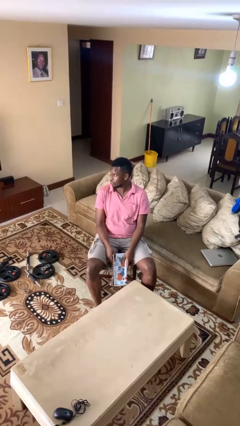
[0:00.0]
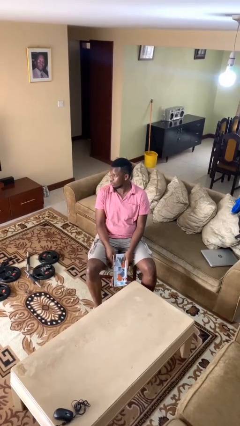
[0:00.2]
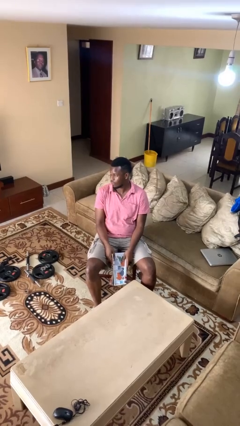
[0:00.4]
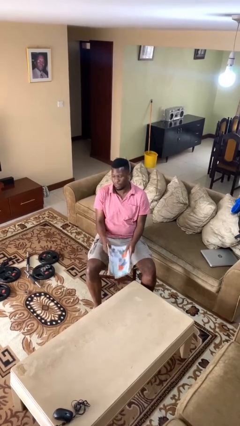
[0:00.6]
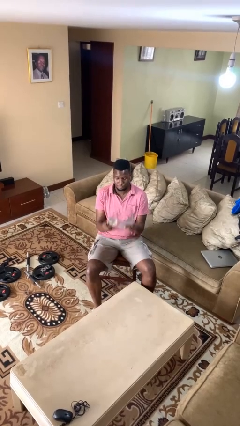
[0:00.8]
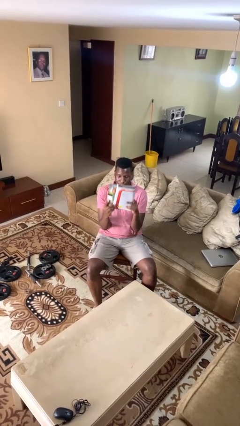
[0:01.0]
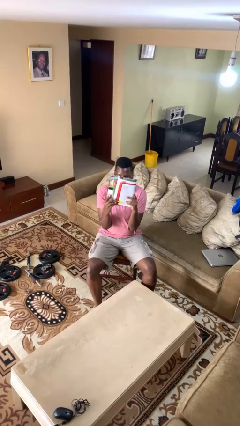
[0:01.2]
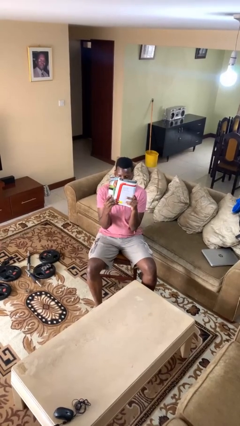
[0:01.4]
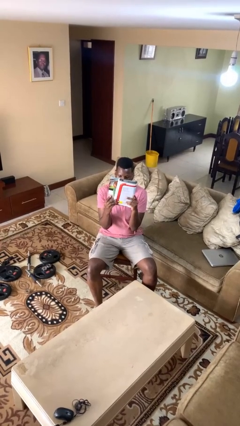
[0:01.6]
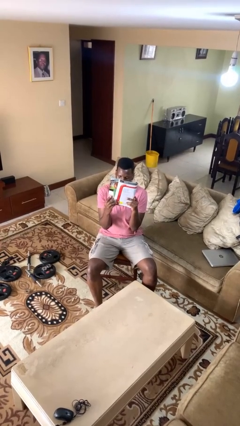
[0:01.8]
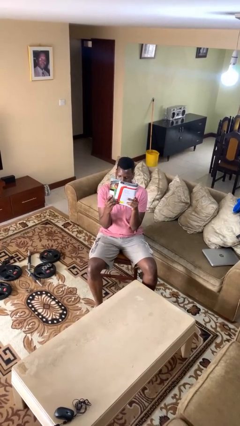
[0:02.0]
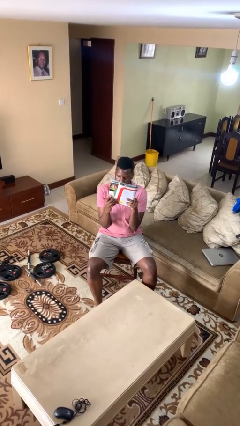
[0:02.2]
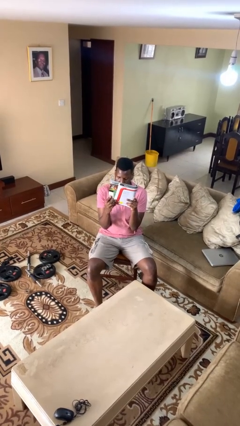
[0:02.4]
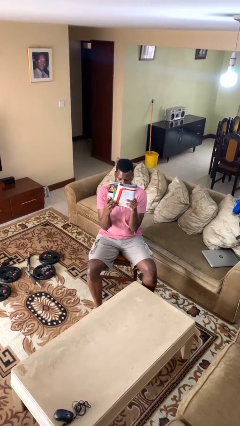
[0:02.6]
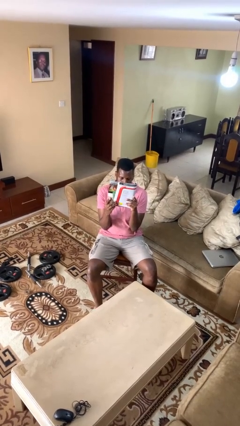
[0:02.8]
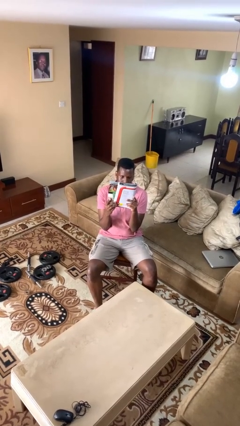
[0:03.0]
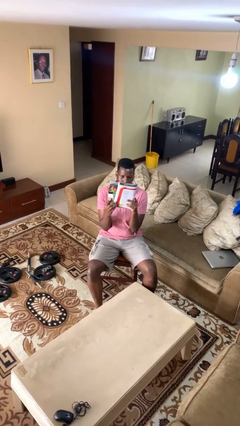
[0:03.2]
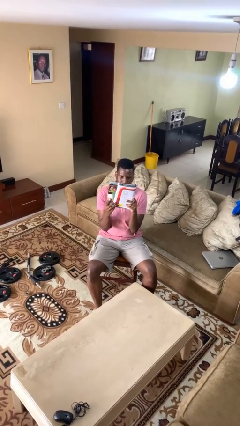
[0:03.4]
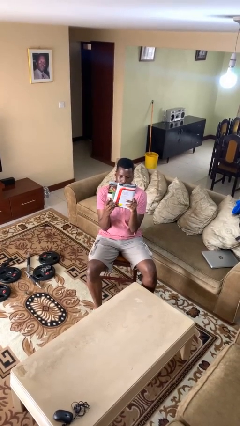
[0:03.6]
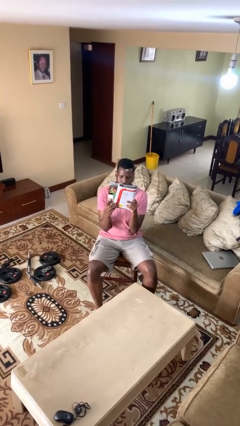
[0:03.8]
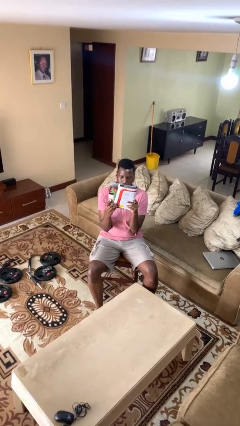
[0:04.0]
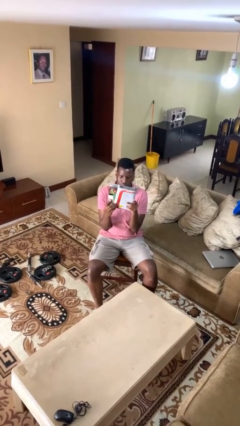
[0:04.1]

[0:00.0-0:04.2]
person reads document

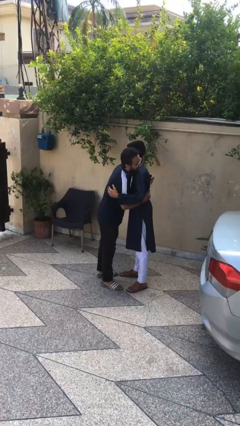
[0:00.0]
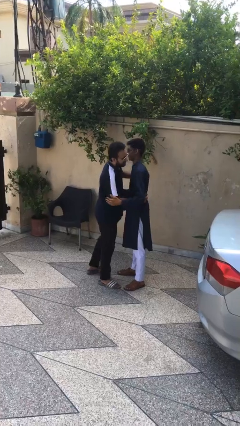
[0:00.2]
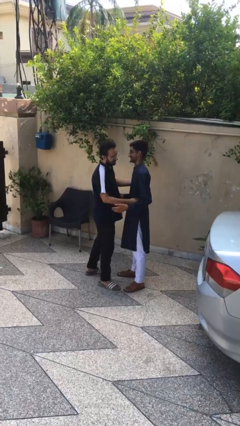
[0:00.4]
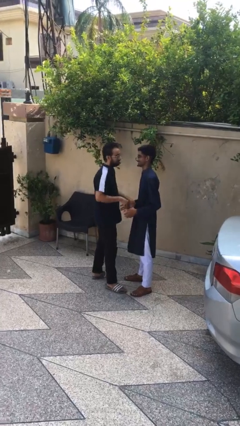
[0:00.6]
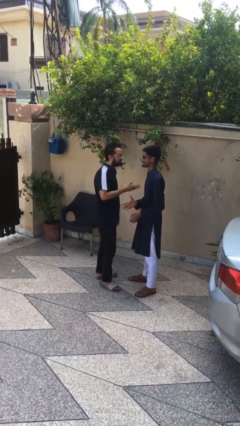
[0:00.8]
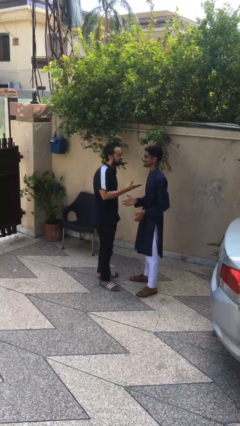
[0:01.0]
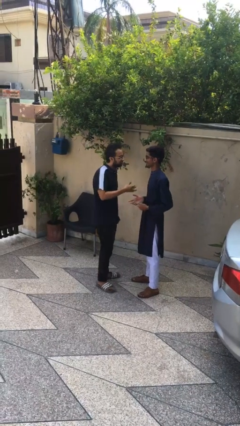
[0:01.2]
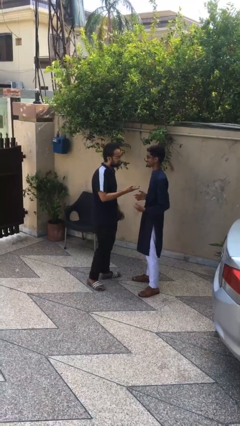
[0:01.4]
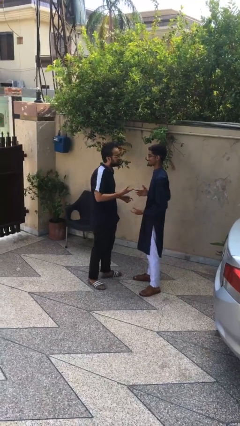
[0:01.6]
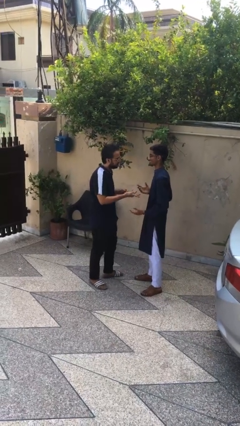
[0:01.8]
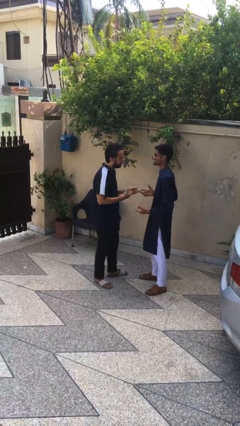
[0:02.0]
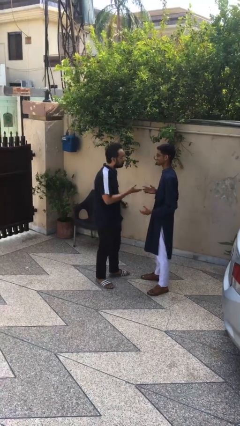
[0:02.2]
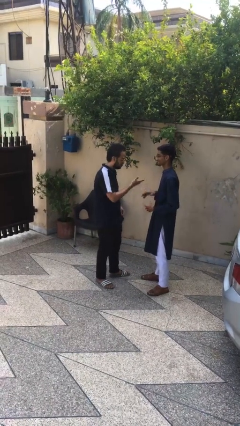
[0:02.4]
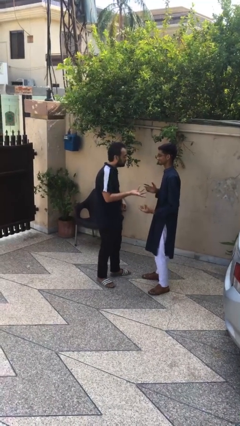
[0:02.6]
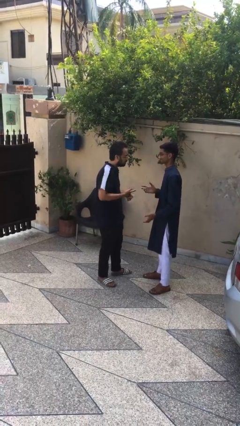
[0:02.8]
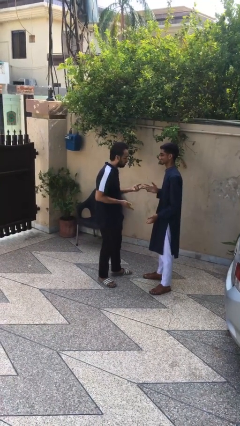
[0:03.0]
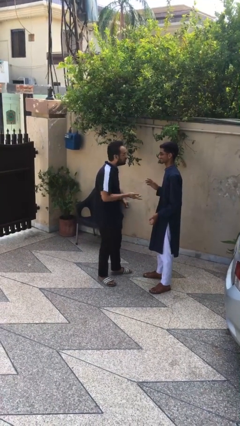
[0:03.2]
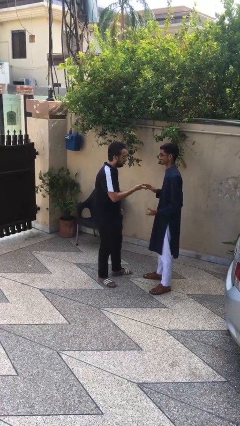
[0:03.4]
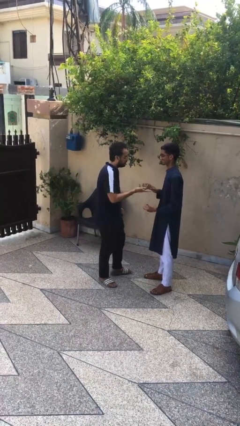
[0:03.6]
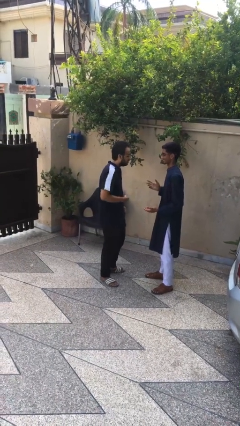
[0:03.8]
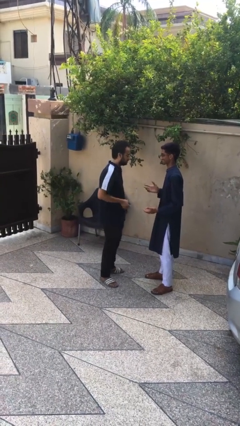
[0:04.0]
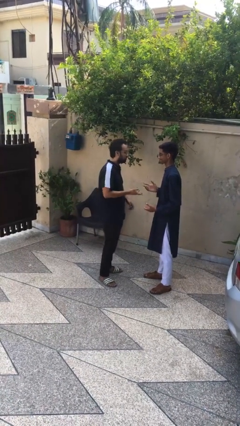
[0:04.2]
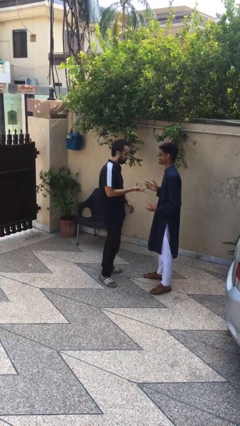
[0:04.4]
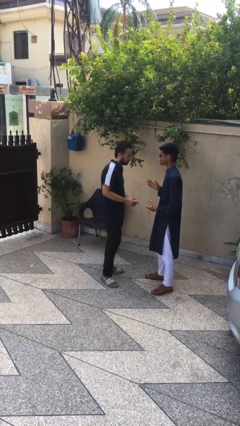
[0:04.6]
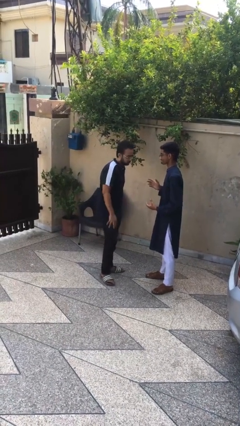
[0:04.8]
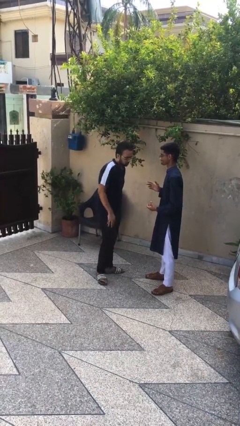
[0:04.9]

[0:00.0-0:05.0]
person talks to person

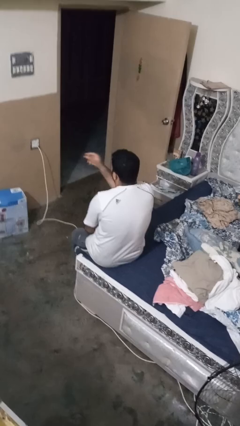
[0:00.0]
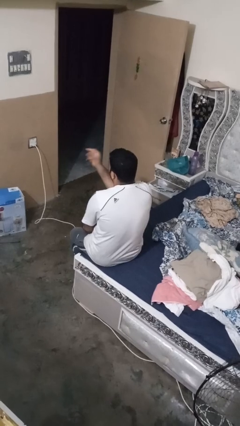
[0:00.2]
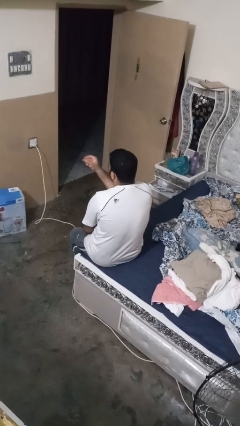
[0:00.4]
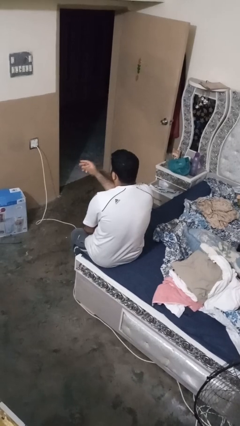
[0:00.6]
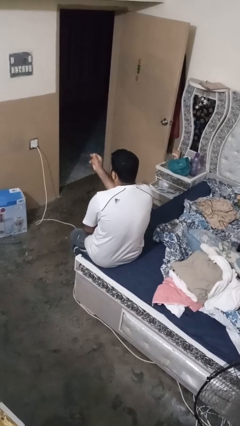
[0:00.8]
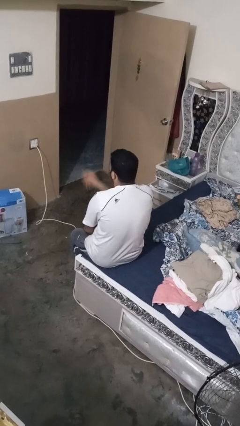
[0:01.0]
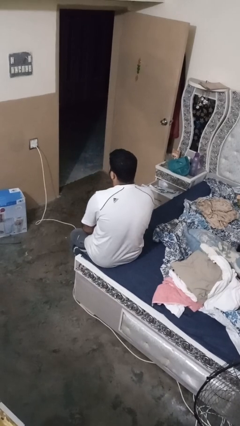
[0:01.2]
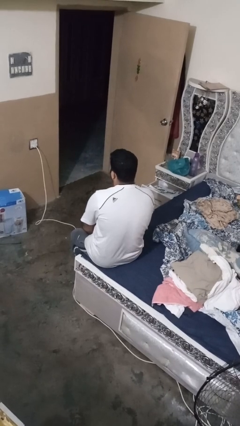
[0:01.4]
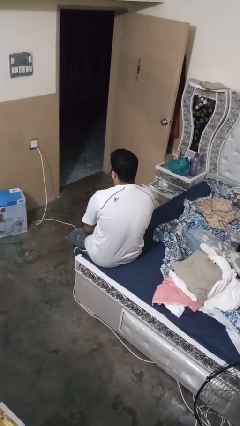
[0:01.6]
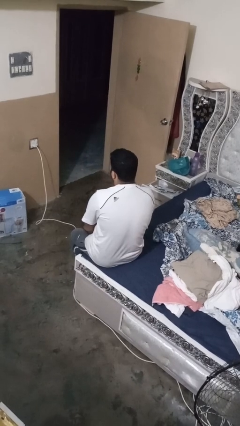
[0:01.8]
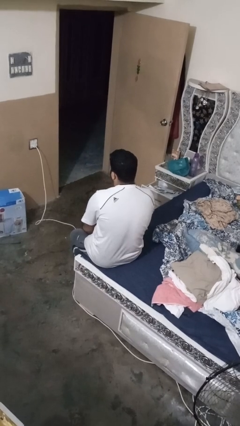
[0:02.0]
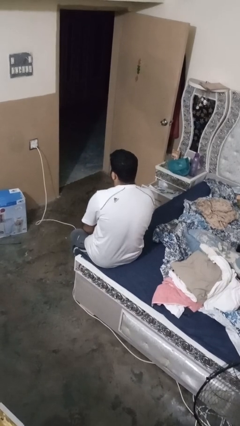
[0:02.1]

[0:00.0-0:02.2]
person snaps fingers

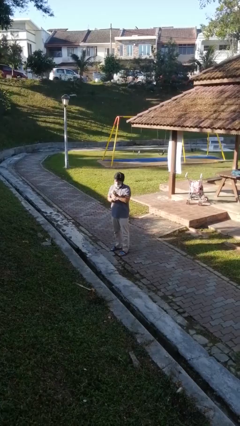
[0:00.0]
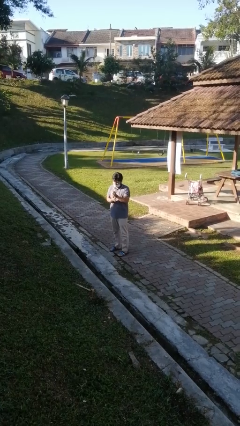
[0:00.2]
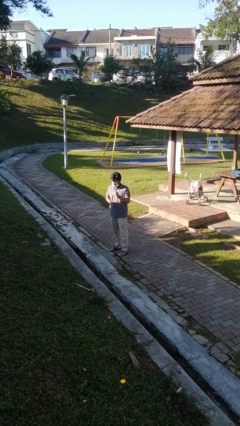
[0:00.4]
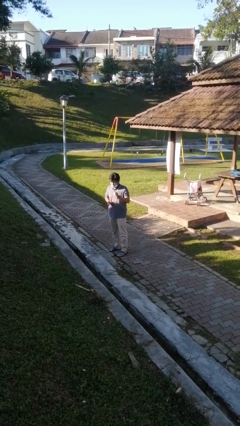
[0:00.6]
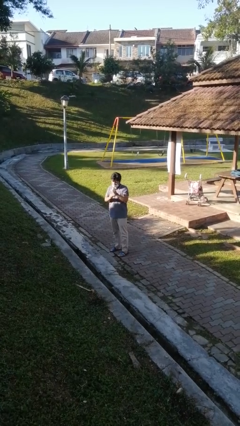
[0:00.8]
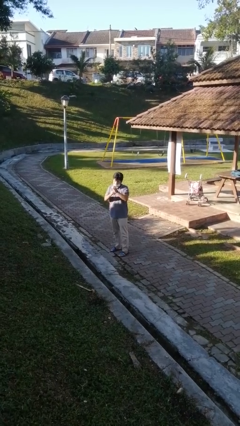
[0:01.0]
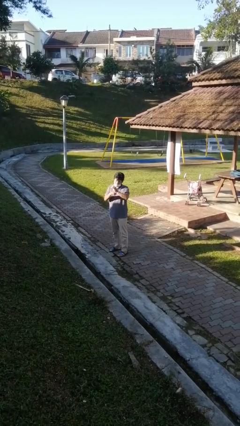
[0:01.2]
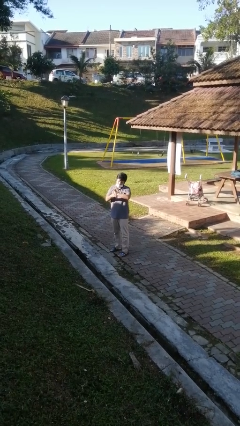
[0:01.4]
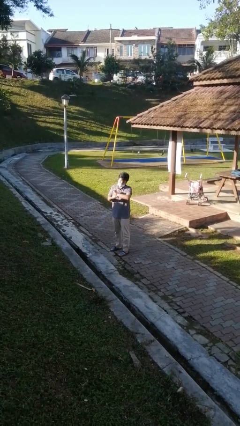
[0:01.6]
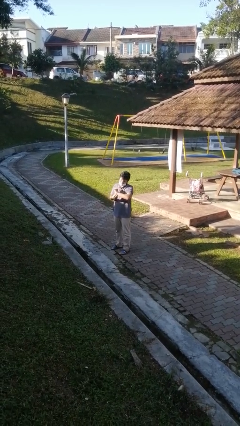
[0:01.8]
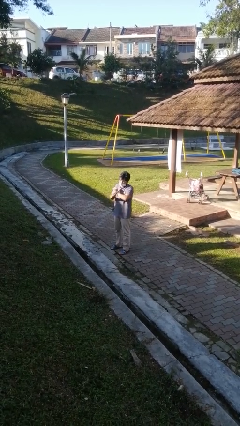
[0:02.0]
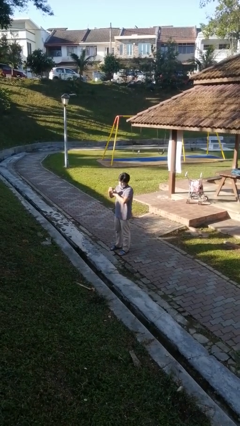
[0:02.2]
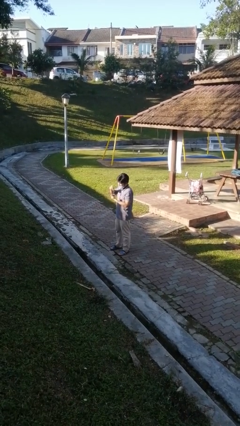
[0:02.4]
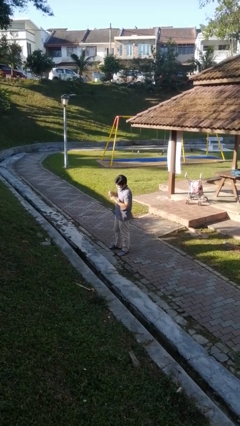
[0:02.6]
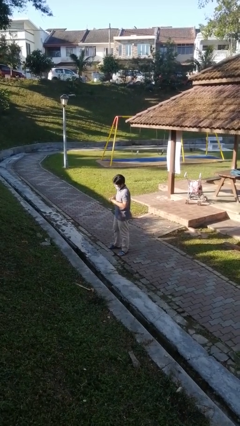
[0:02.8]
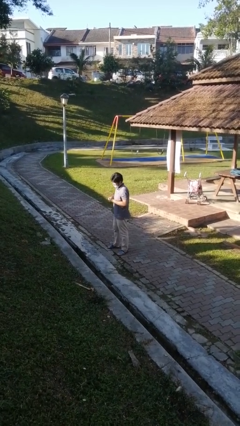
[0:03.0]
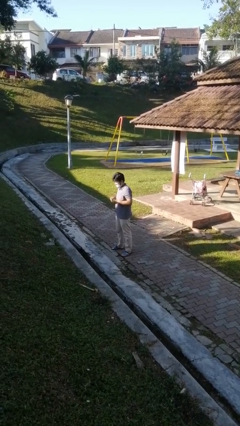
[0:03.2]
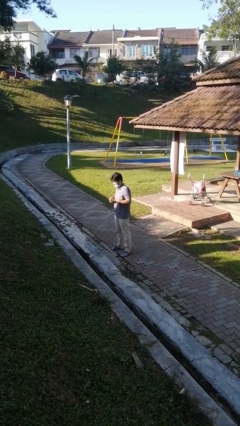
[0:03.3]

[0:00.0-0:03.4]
person takes off wristwatch

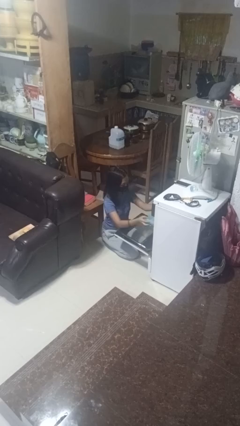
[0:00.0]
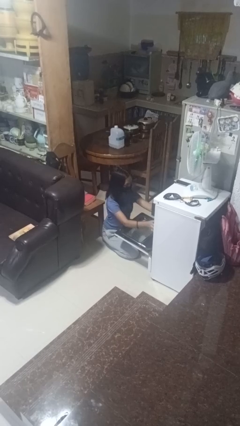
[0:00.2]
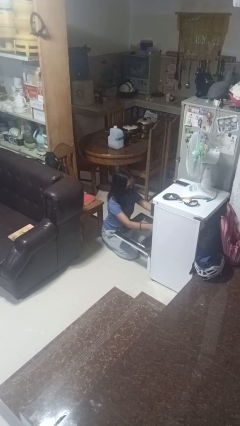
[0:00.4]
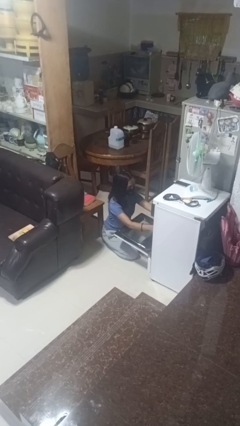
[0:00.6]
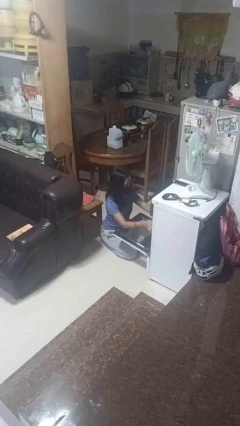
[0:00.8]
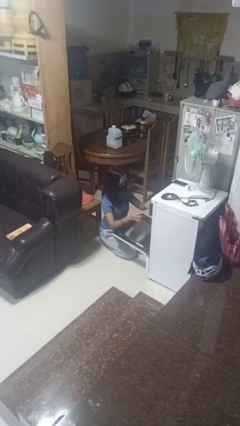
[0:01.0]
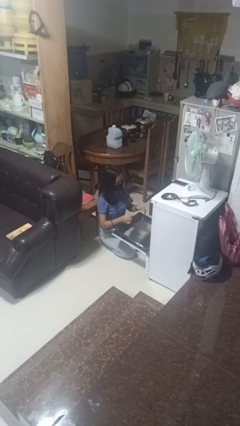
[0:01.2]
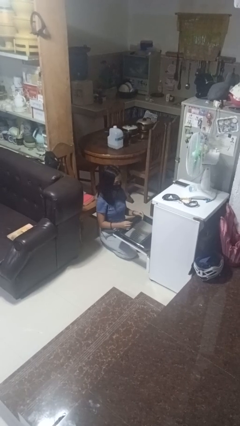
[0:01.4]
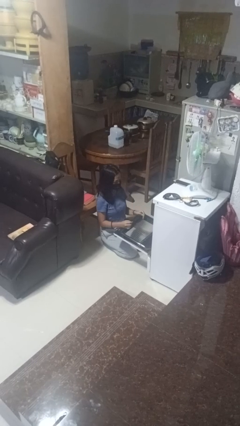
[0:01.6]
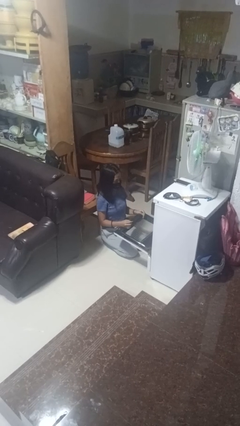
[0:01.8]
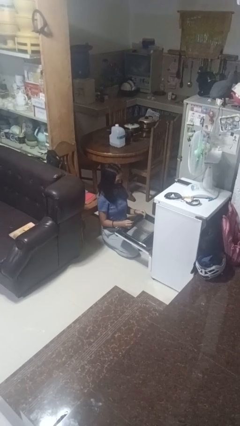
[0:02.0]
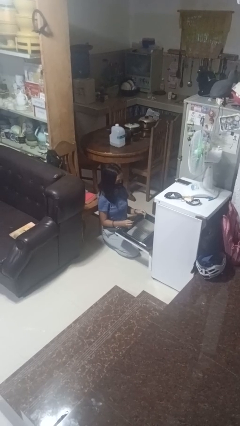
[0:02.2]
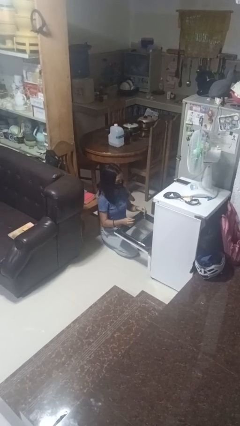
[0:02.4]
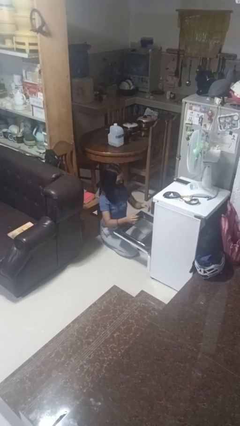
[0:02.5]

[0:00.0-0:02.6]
person puts object into oven

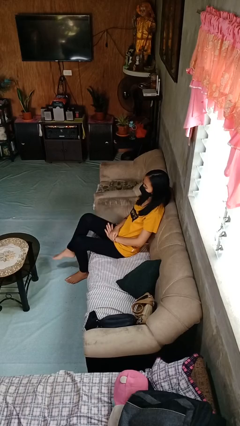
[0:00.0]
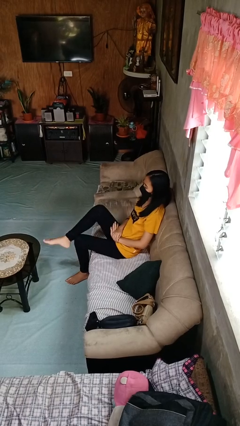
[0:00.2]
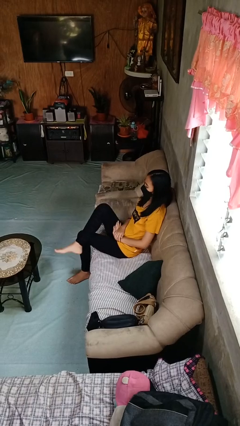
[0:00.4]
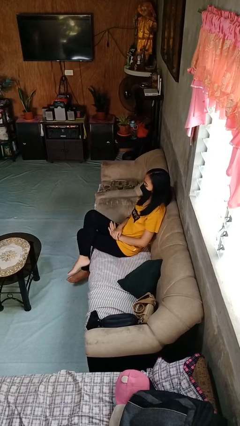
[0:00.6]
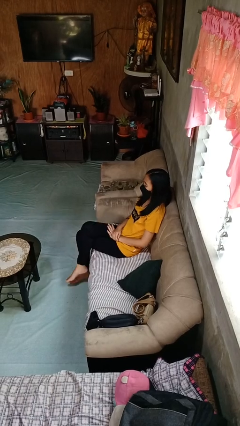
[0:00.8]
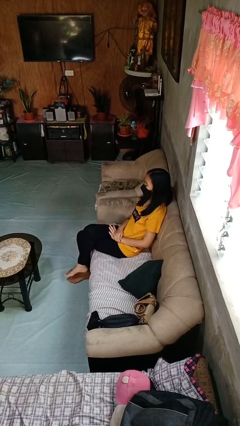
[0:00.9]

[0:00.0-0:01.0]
person crosses legs
